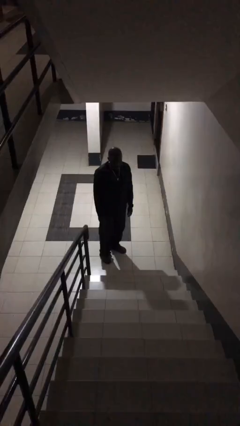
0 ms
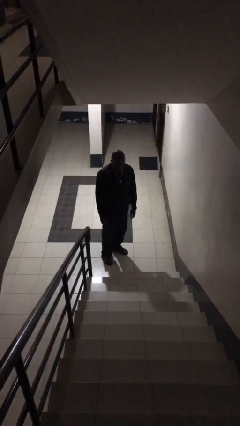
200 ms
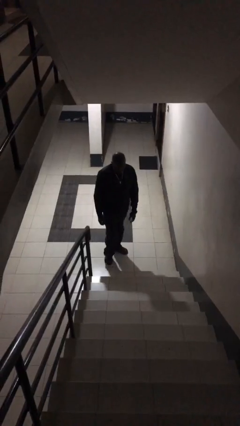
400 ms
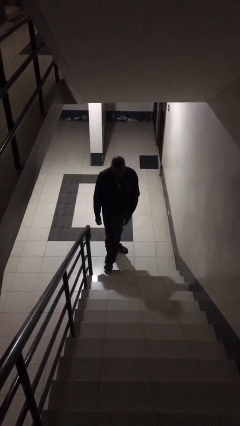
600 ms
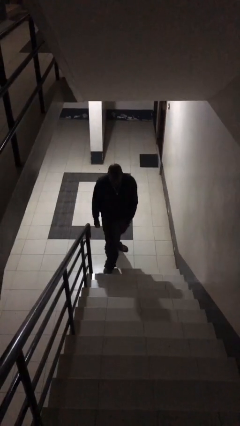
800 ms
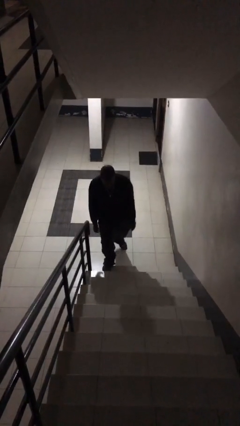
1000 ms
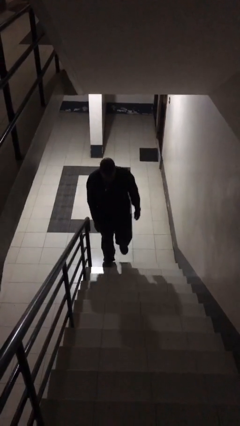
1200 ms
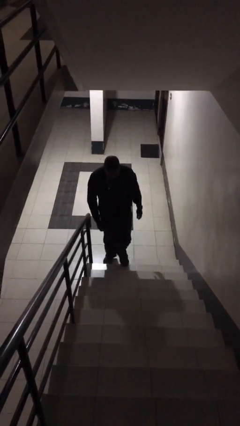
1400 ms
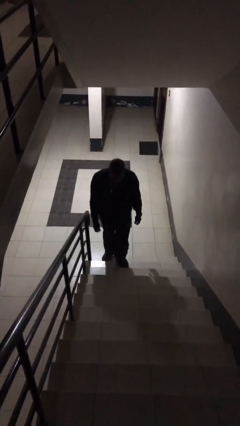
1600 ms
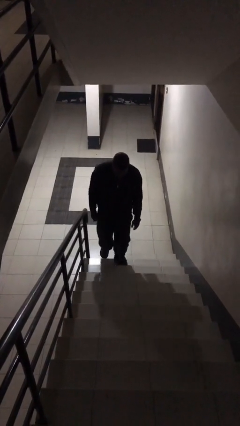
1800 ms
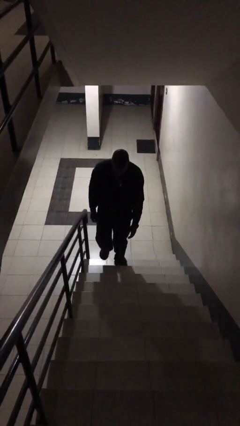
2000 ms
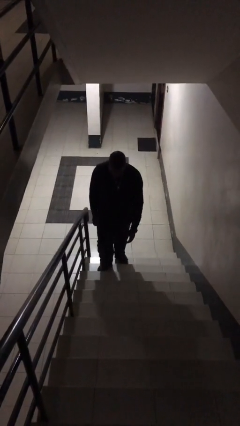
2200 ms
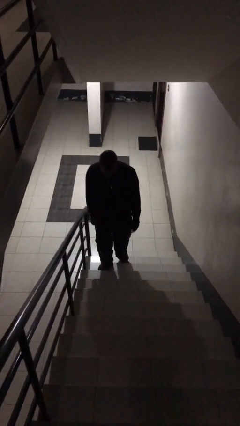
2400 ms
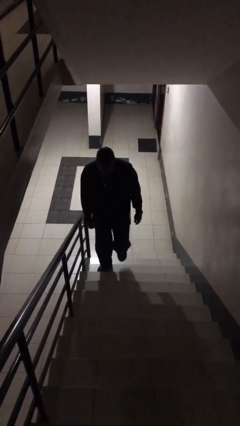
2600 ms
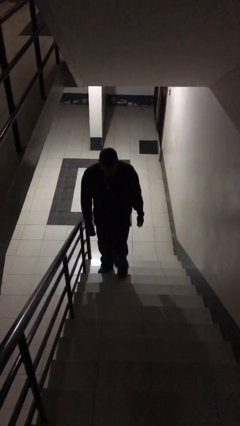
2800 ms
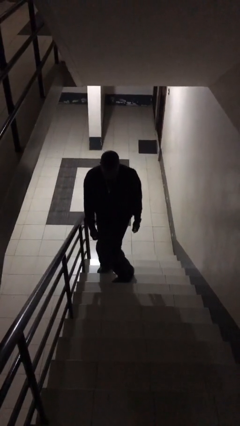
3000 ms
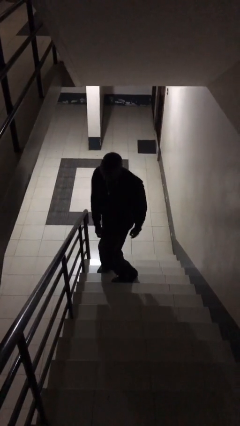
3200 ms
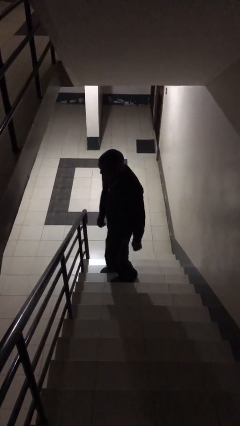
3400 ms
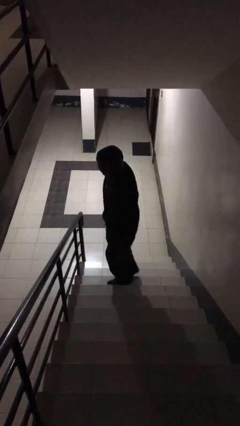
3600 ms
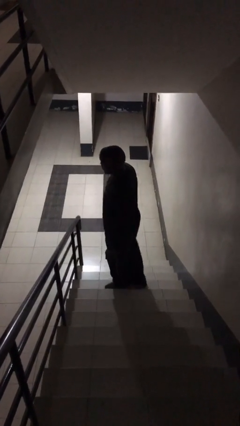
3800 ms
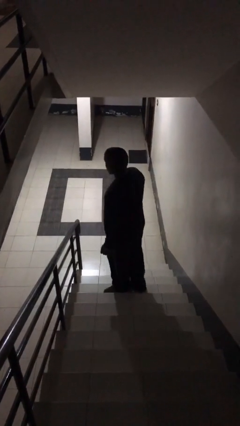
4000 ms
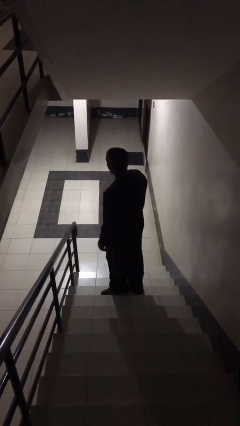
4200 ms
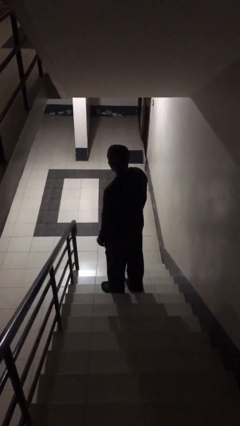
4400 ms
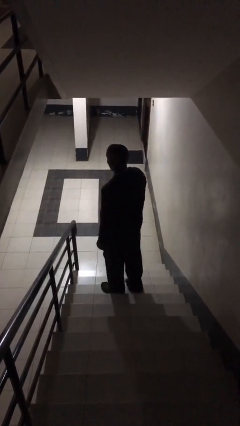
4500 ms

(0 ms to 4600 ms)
person climbs up stairs

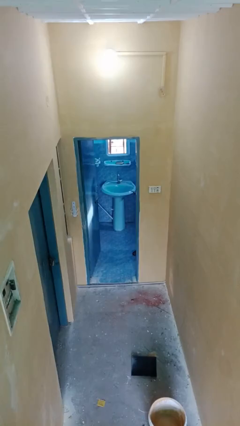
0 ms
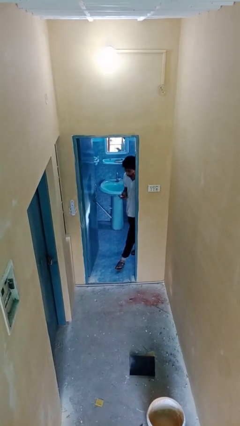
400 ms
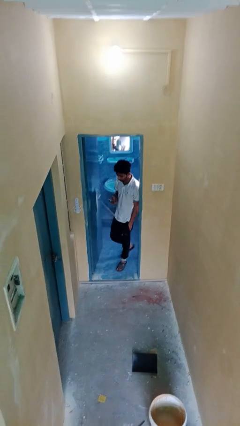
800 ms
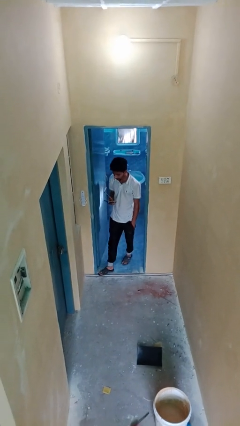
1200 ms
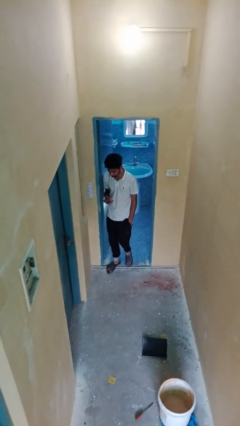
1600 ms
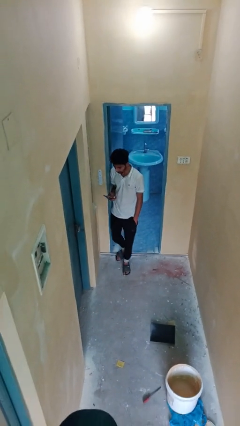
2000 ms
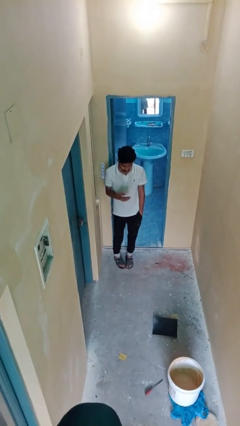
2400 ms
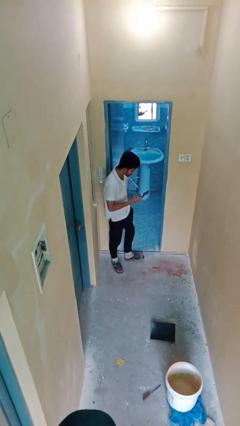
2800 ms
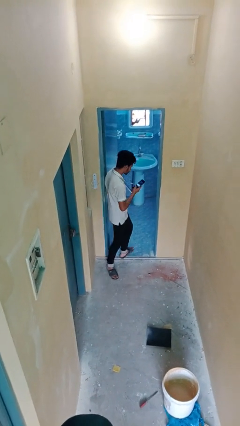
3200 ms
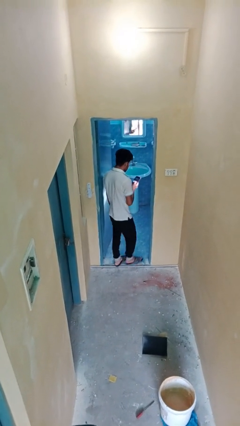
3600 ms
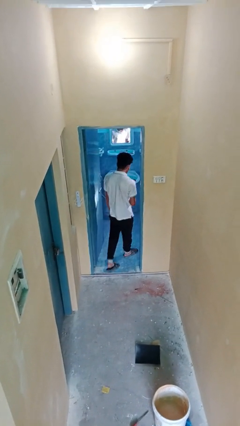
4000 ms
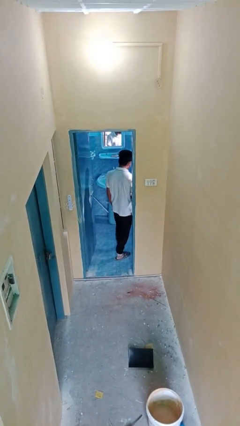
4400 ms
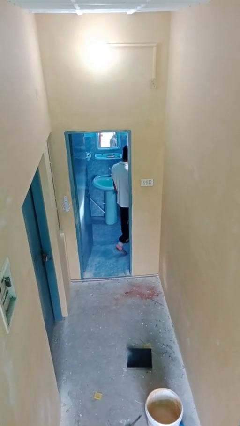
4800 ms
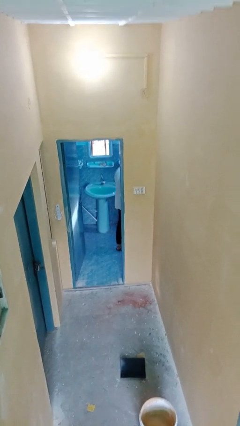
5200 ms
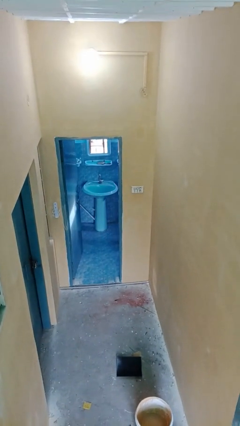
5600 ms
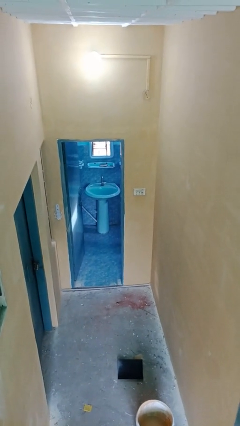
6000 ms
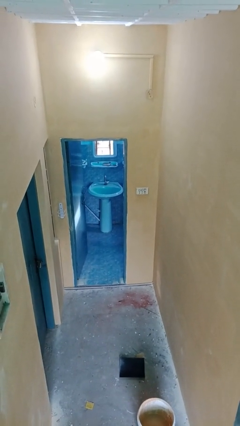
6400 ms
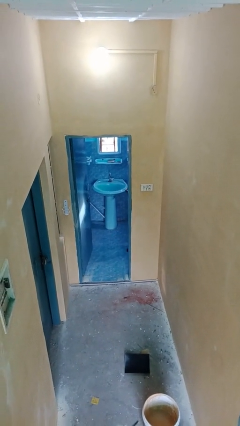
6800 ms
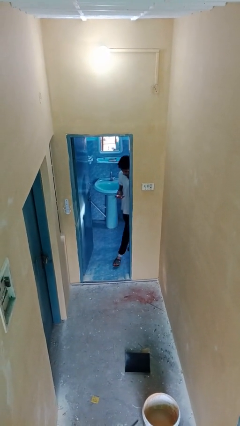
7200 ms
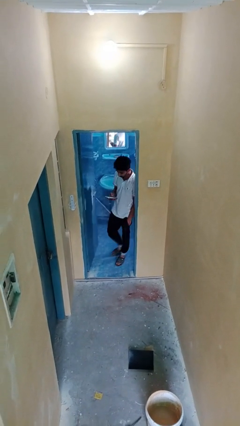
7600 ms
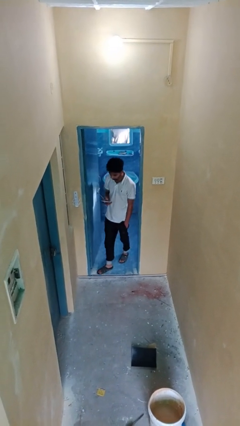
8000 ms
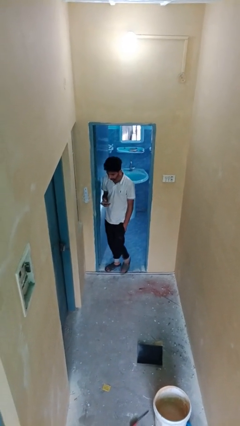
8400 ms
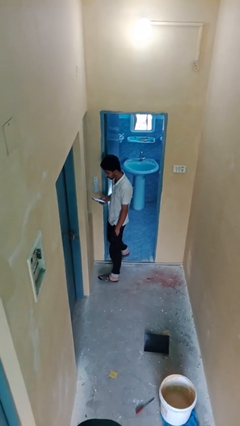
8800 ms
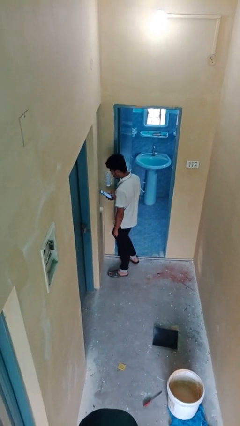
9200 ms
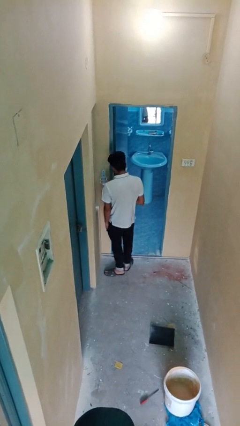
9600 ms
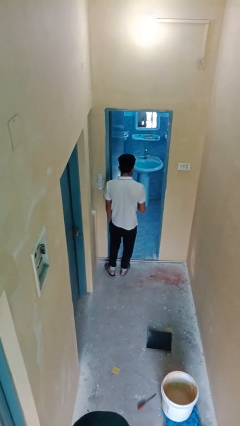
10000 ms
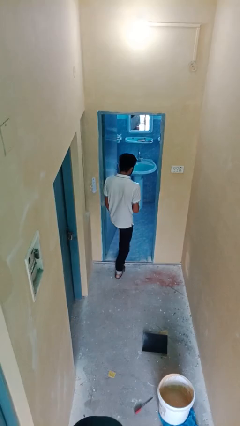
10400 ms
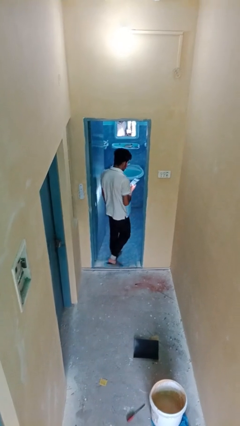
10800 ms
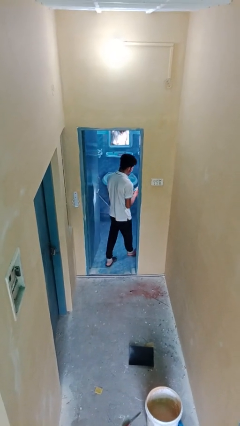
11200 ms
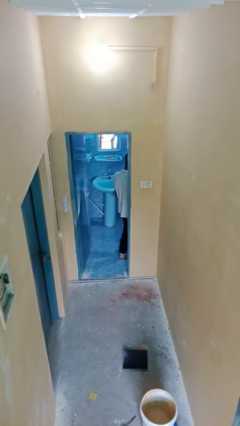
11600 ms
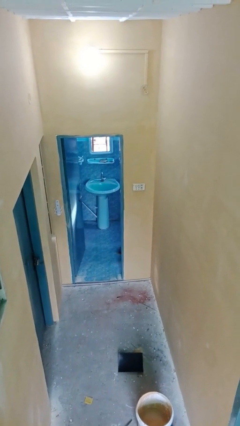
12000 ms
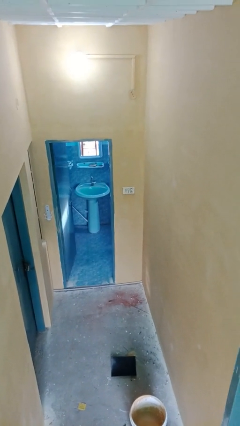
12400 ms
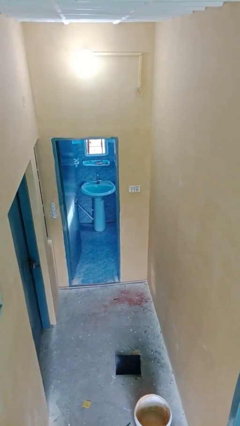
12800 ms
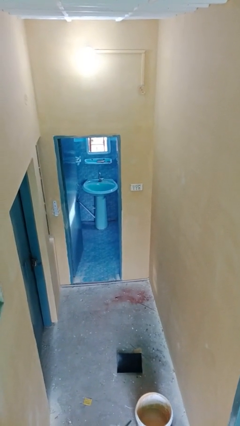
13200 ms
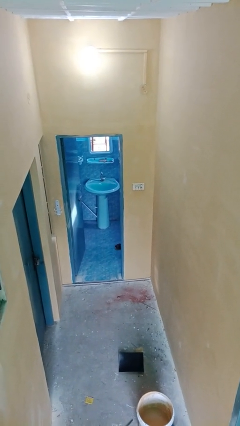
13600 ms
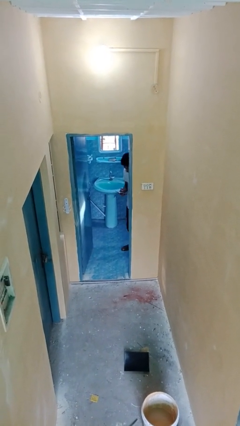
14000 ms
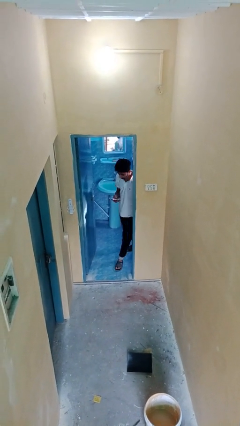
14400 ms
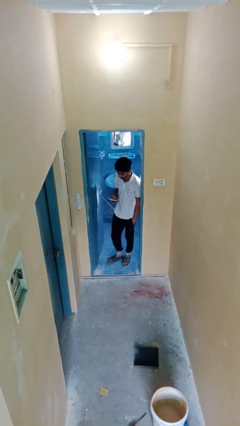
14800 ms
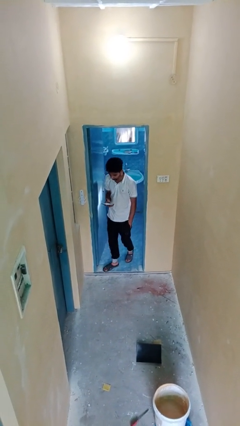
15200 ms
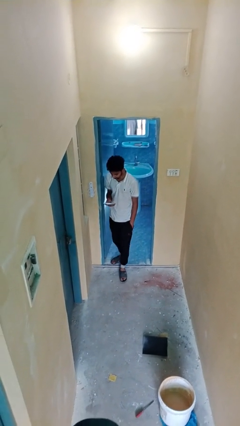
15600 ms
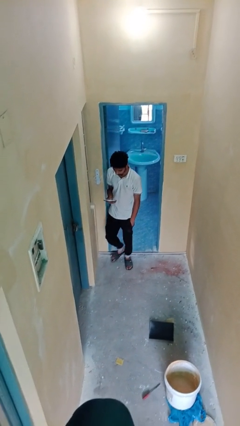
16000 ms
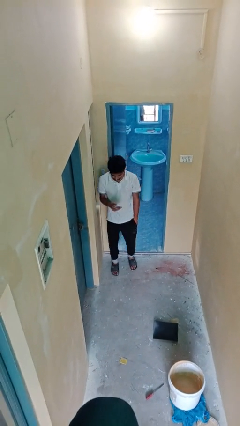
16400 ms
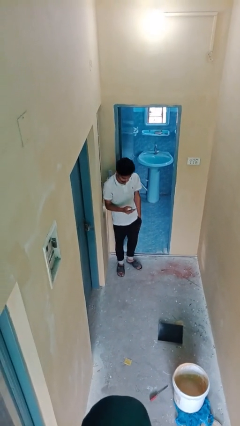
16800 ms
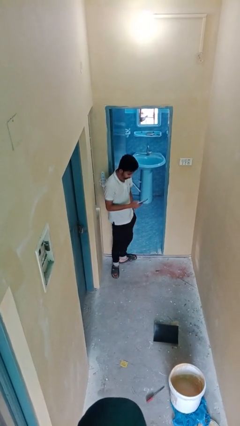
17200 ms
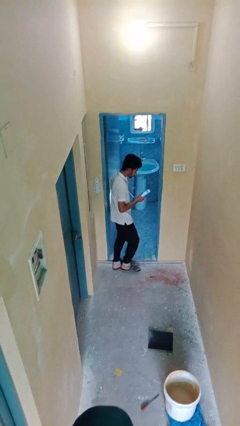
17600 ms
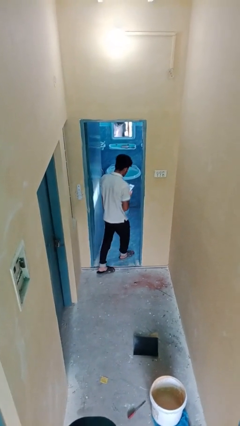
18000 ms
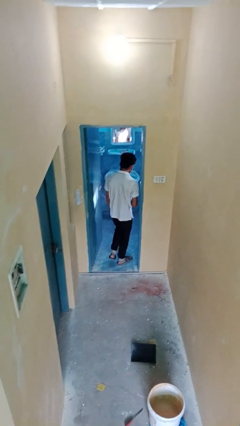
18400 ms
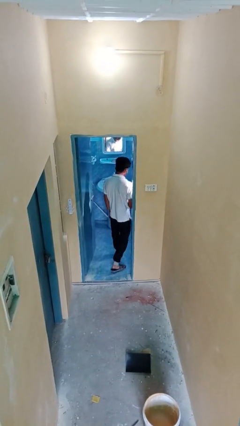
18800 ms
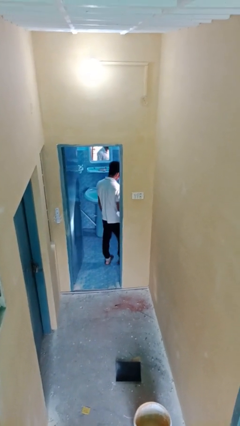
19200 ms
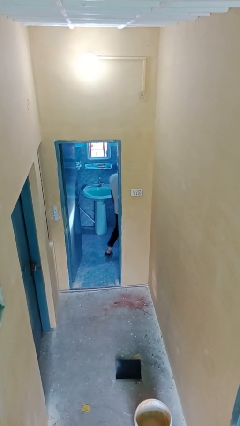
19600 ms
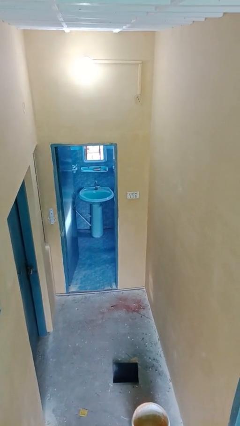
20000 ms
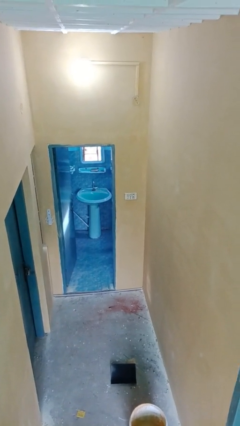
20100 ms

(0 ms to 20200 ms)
person texts on phone

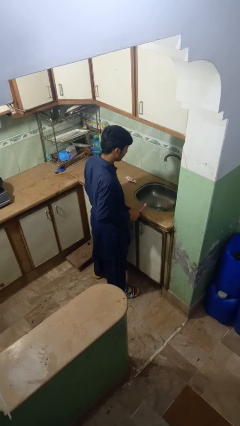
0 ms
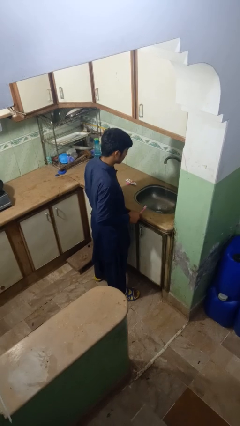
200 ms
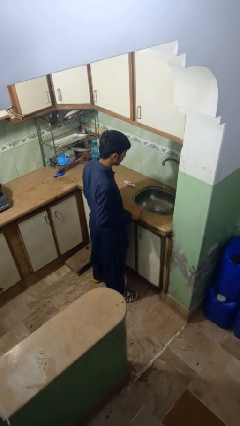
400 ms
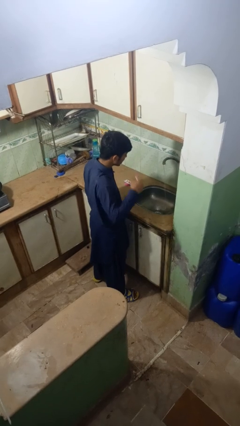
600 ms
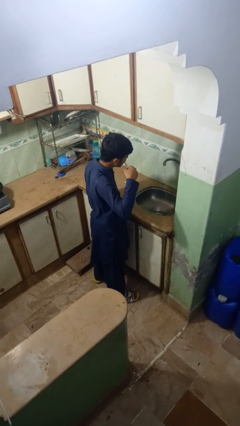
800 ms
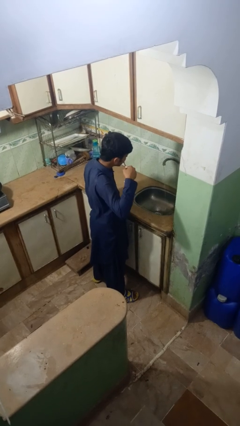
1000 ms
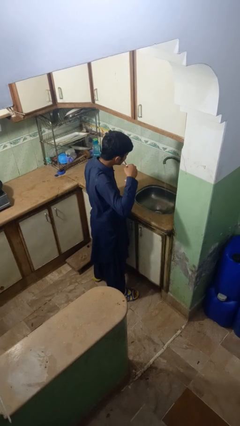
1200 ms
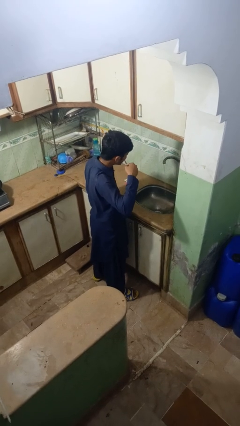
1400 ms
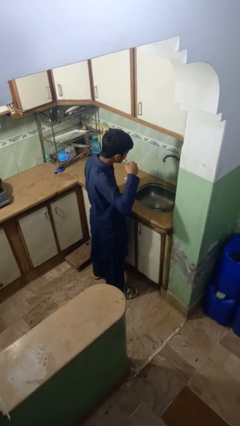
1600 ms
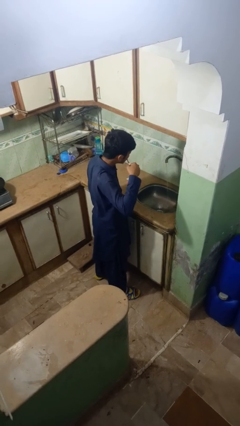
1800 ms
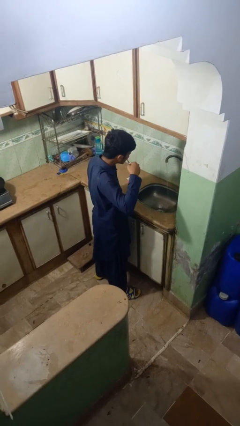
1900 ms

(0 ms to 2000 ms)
person brushes teeth

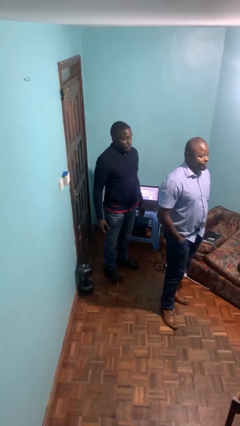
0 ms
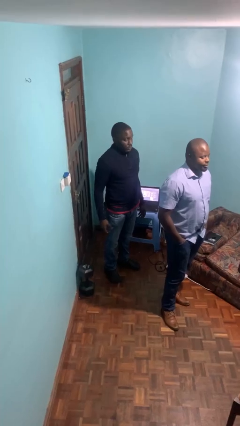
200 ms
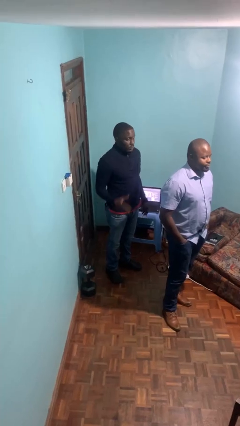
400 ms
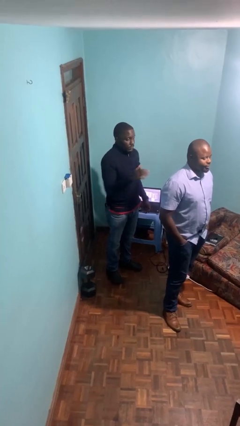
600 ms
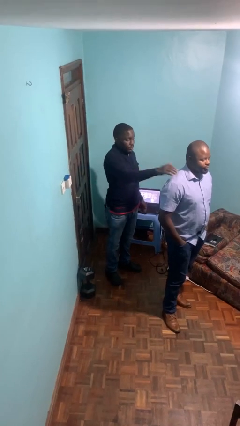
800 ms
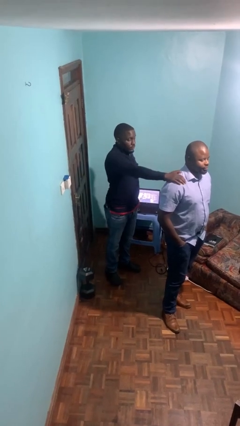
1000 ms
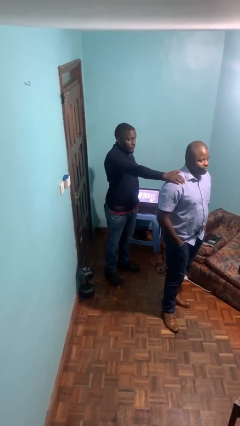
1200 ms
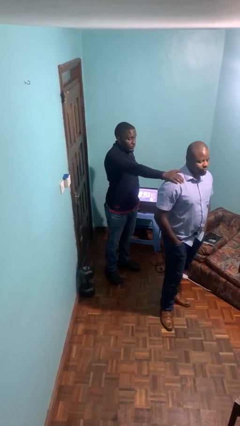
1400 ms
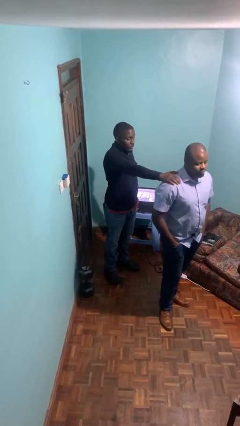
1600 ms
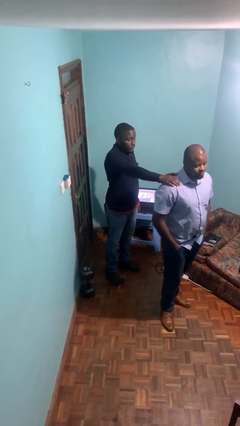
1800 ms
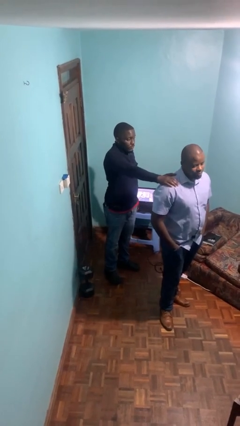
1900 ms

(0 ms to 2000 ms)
person grabs person by shoulder
